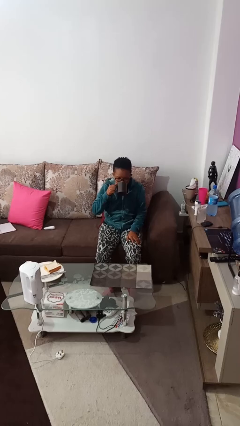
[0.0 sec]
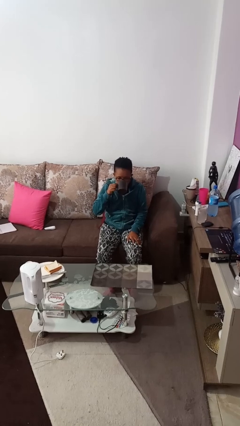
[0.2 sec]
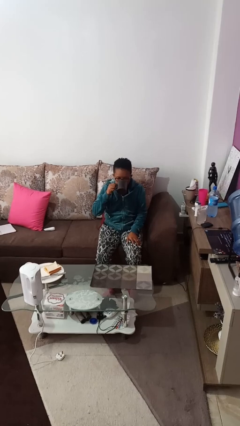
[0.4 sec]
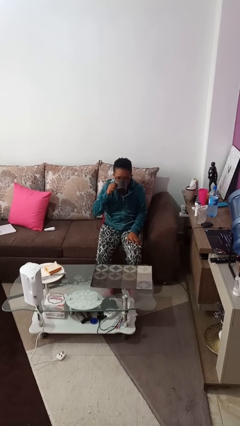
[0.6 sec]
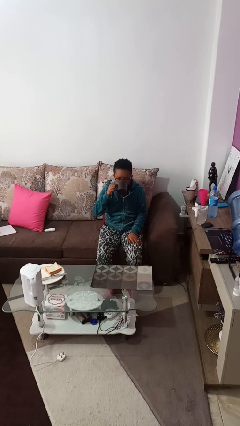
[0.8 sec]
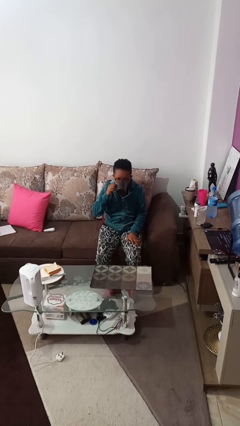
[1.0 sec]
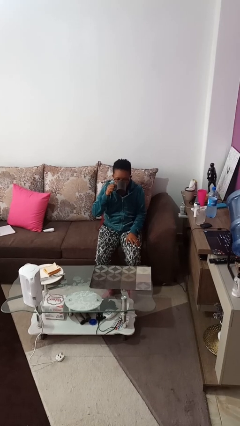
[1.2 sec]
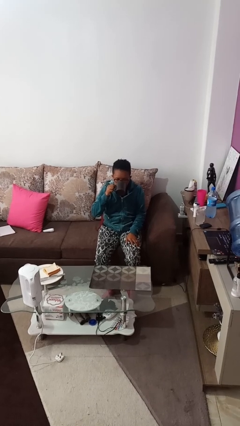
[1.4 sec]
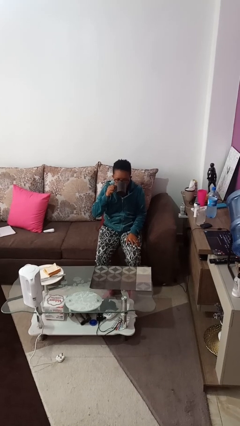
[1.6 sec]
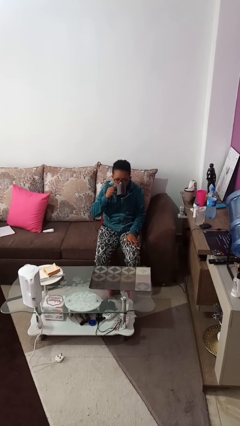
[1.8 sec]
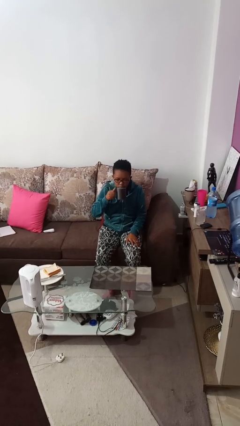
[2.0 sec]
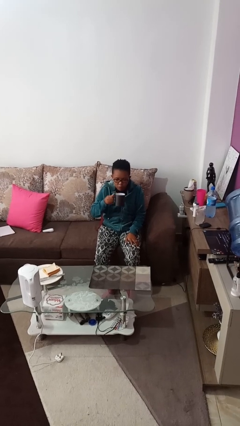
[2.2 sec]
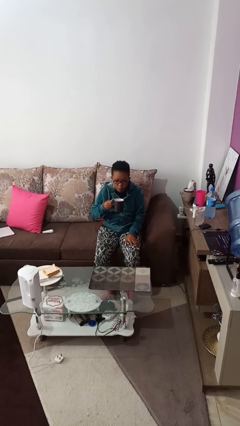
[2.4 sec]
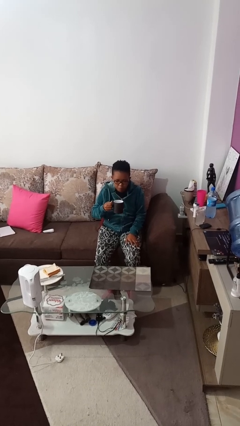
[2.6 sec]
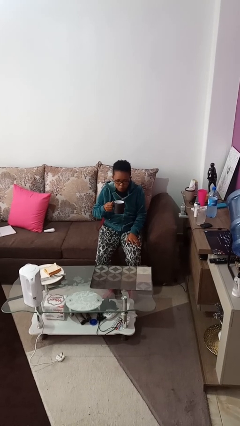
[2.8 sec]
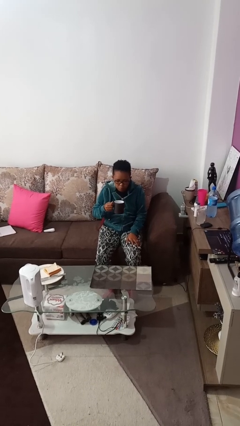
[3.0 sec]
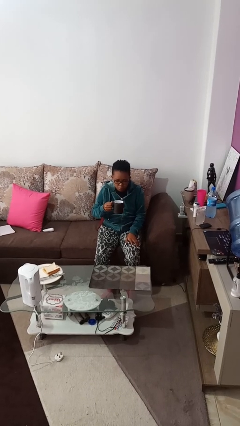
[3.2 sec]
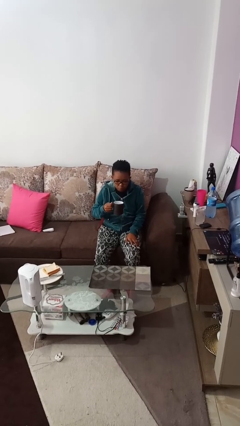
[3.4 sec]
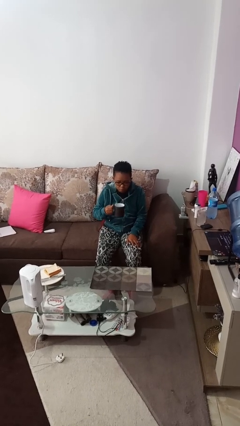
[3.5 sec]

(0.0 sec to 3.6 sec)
person drinks from mug

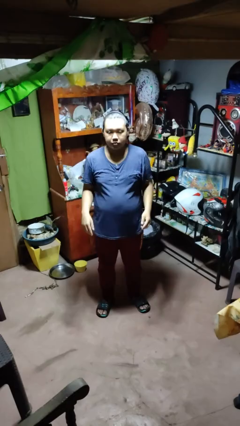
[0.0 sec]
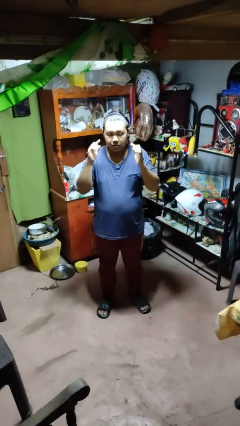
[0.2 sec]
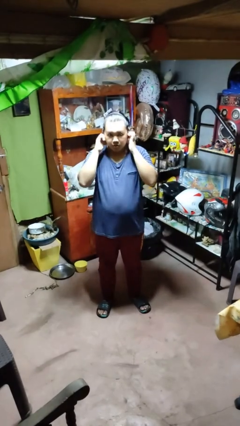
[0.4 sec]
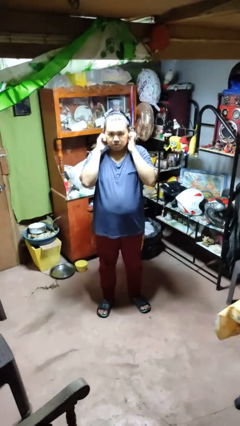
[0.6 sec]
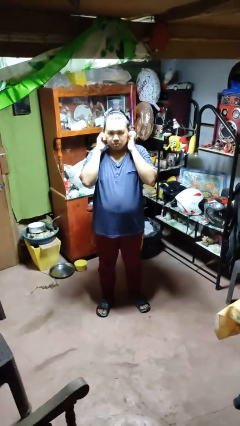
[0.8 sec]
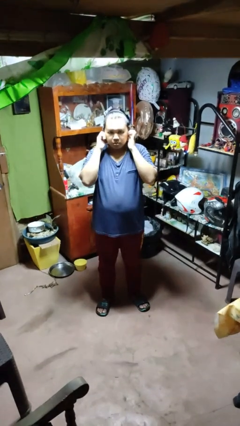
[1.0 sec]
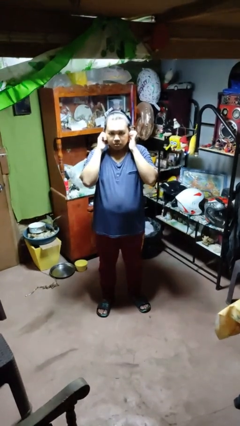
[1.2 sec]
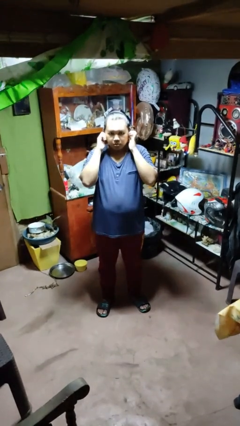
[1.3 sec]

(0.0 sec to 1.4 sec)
person puts fingers in ear

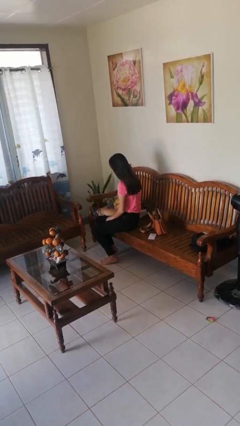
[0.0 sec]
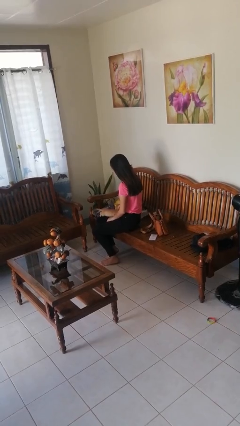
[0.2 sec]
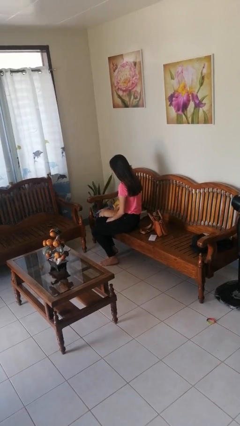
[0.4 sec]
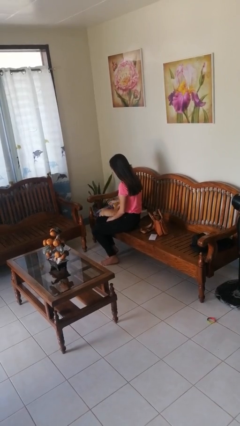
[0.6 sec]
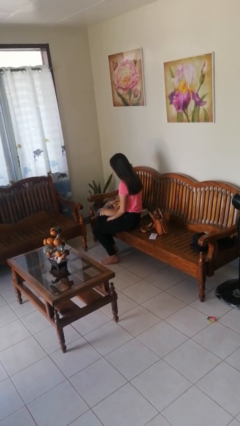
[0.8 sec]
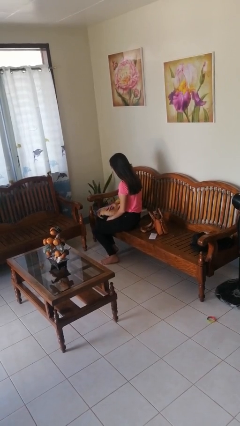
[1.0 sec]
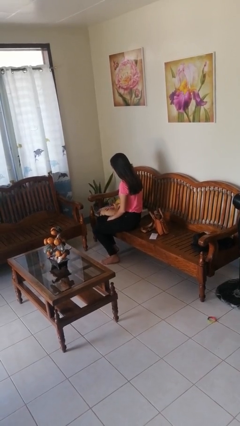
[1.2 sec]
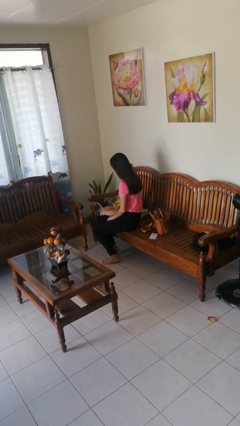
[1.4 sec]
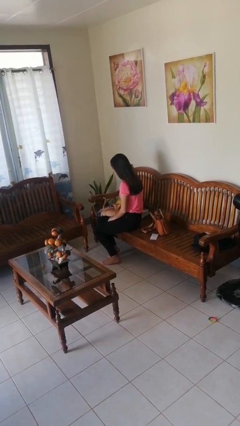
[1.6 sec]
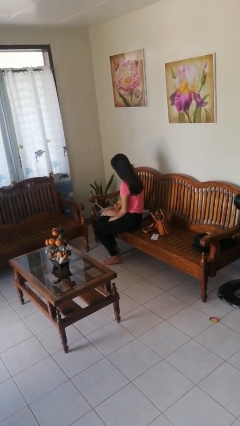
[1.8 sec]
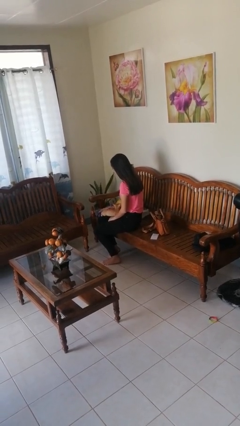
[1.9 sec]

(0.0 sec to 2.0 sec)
person pets cat

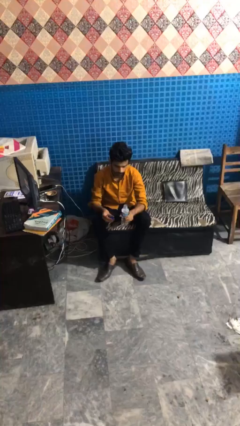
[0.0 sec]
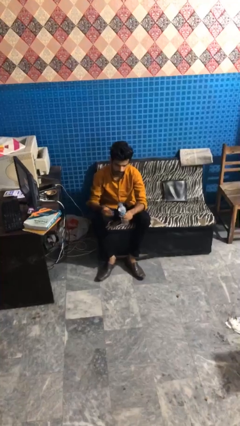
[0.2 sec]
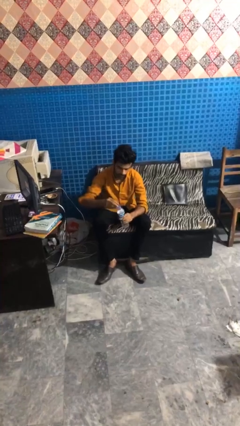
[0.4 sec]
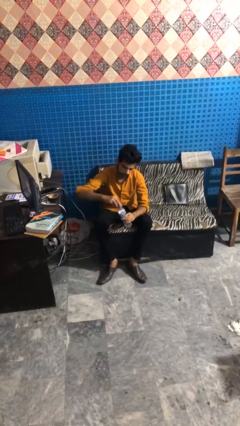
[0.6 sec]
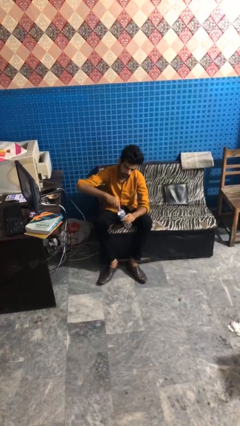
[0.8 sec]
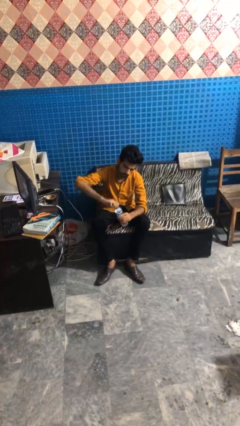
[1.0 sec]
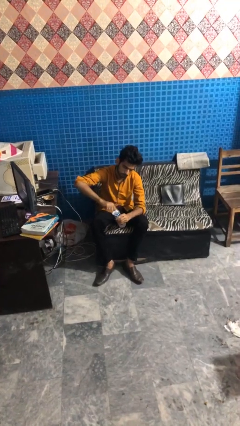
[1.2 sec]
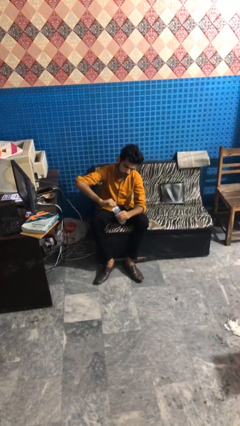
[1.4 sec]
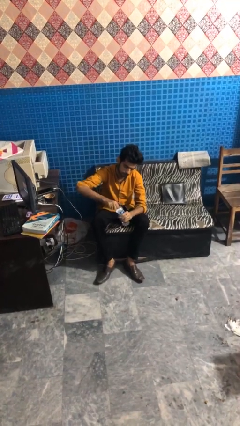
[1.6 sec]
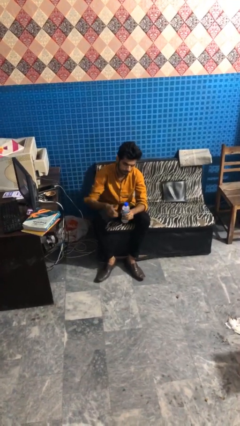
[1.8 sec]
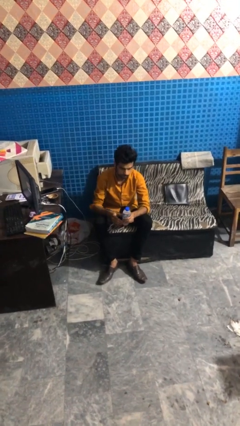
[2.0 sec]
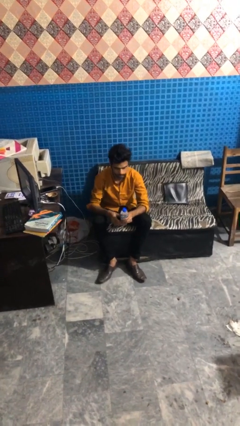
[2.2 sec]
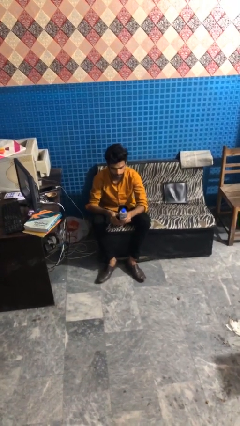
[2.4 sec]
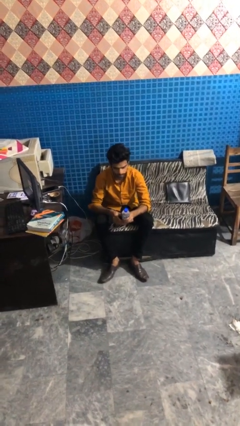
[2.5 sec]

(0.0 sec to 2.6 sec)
person screws lid to bottle

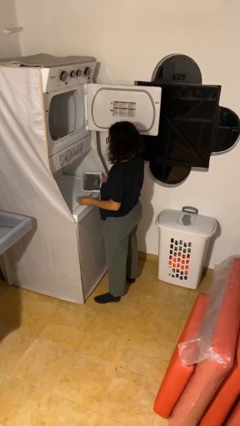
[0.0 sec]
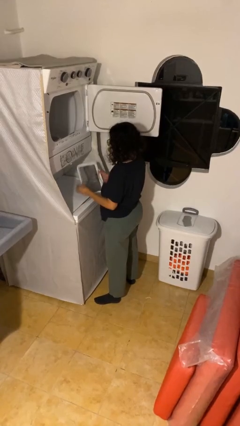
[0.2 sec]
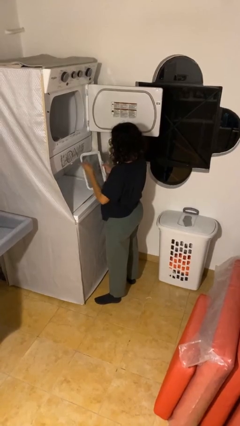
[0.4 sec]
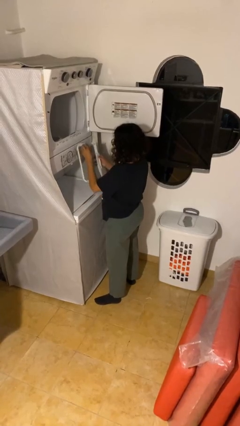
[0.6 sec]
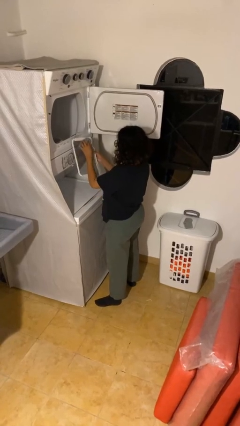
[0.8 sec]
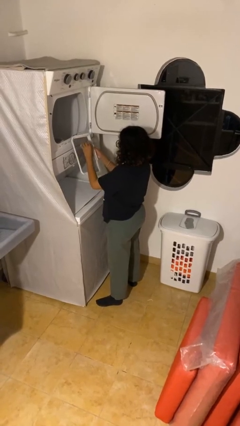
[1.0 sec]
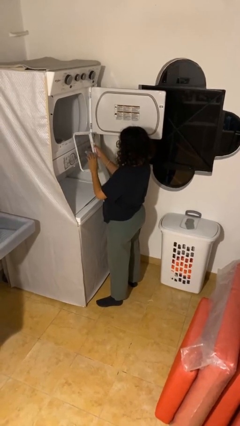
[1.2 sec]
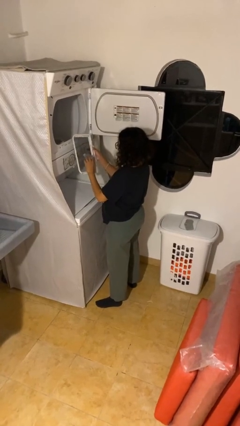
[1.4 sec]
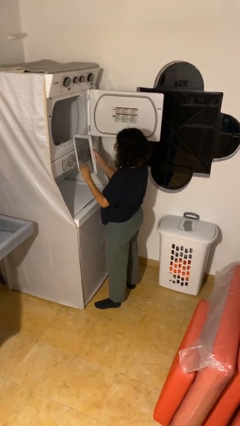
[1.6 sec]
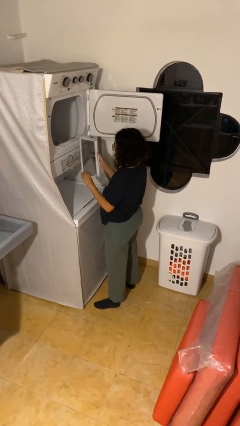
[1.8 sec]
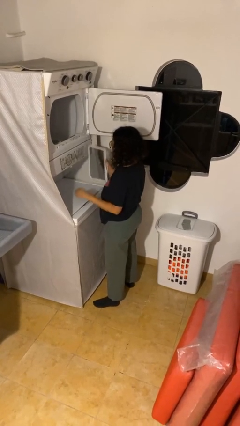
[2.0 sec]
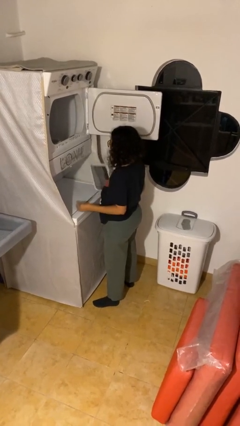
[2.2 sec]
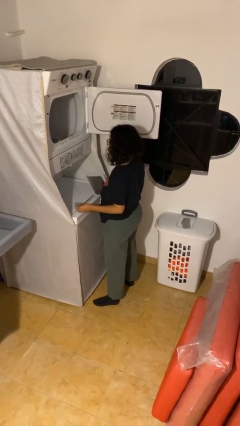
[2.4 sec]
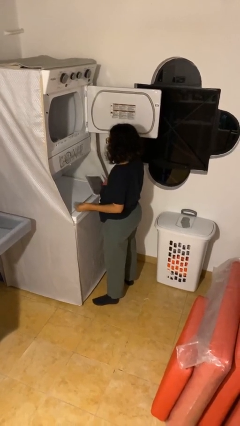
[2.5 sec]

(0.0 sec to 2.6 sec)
person cleans dryer lint trap

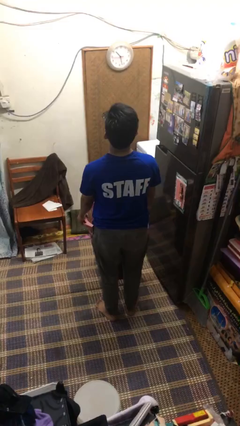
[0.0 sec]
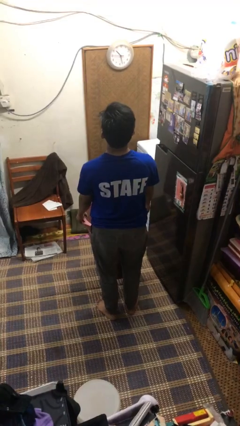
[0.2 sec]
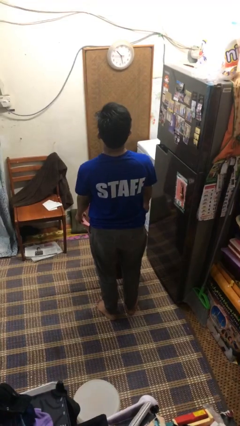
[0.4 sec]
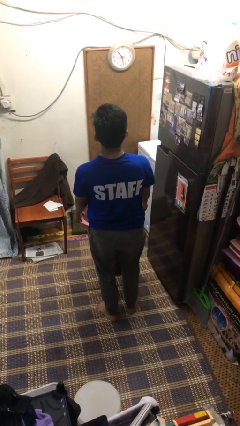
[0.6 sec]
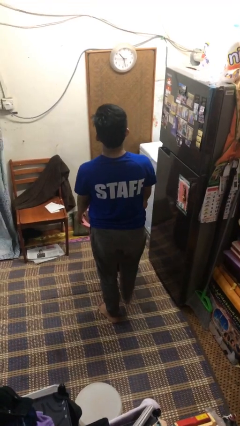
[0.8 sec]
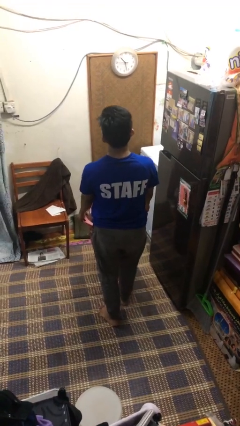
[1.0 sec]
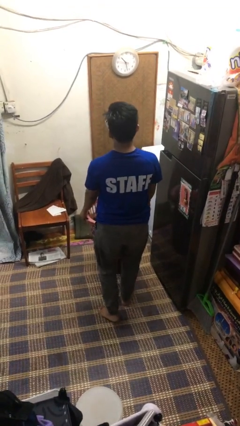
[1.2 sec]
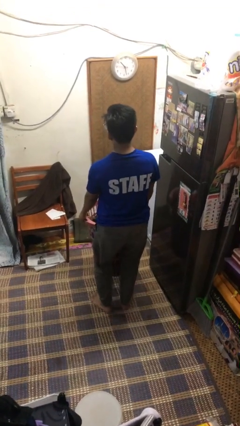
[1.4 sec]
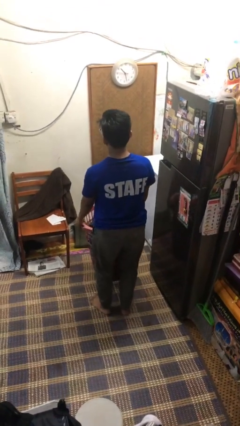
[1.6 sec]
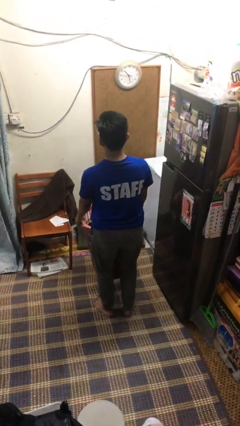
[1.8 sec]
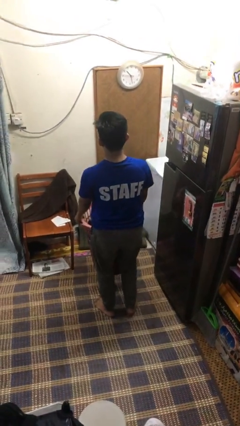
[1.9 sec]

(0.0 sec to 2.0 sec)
person carries laundry basket

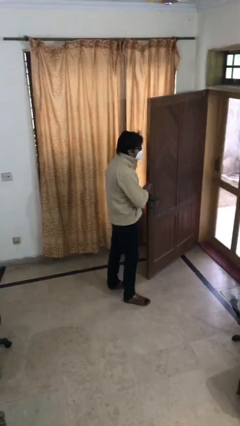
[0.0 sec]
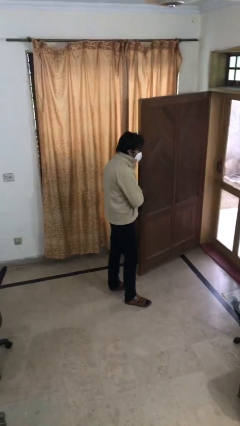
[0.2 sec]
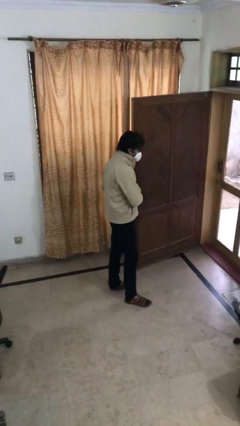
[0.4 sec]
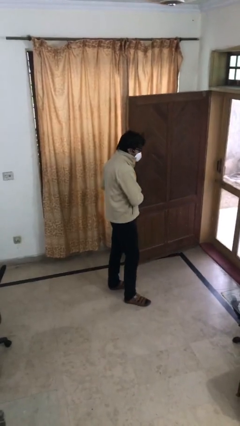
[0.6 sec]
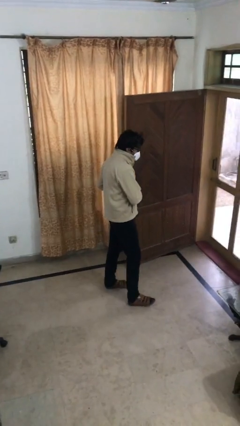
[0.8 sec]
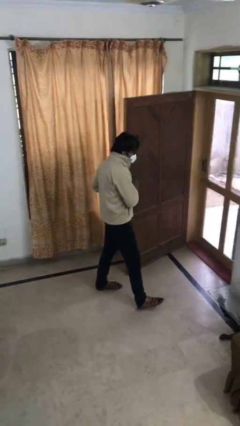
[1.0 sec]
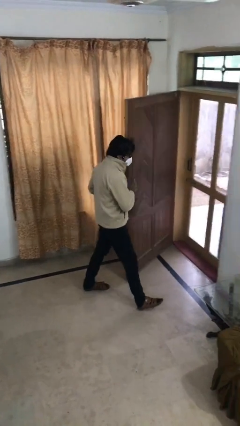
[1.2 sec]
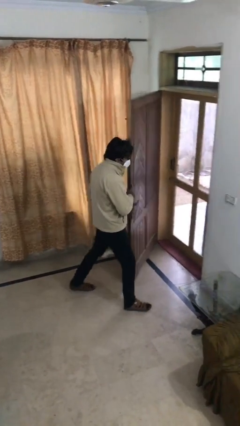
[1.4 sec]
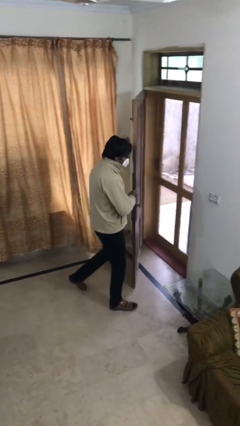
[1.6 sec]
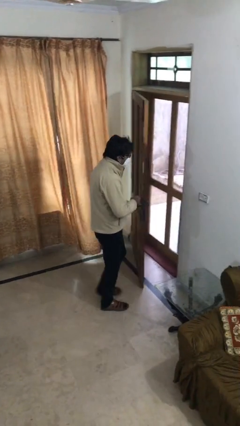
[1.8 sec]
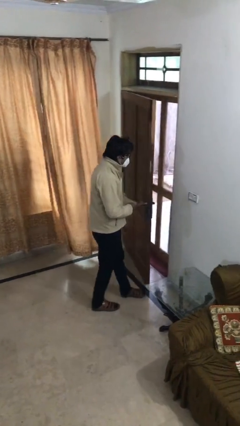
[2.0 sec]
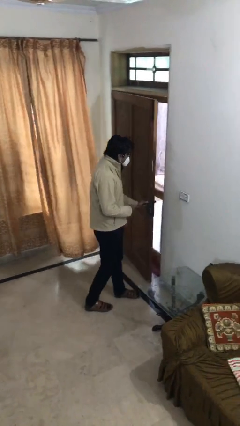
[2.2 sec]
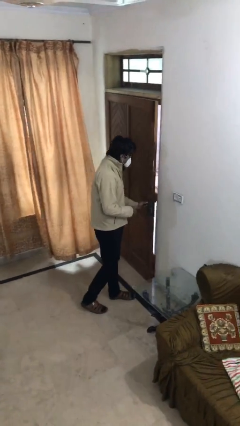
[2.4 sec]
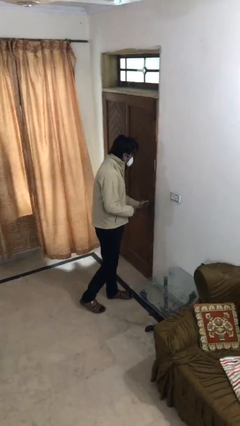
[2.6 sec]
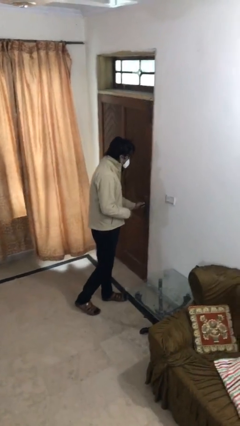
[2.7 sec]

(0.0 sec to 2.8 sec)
person closes facility door
